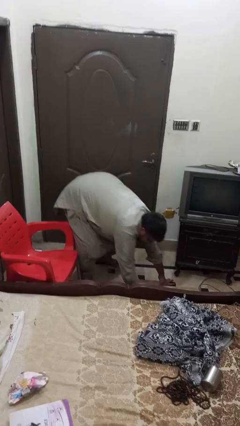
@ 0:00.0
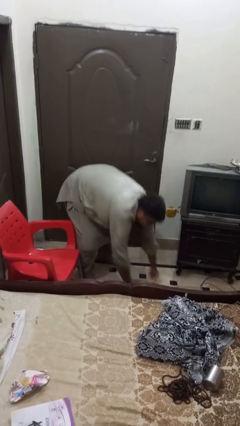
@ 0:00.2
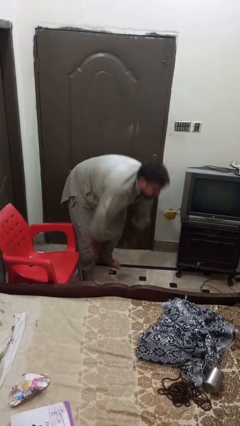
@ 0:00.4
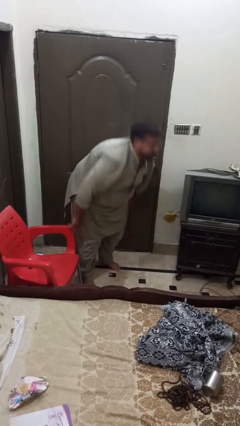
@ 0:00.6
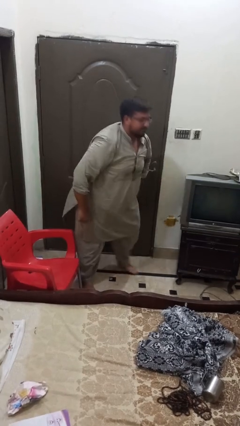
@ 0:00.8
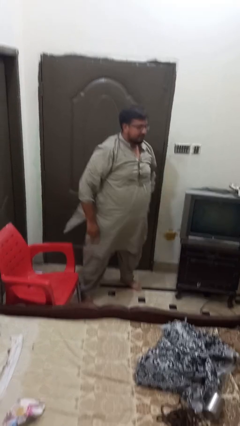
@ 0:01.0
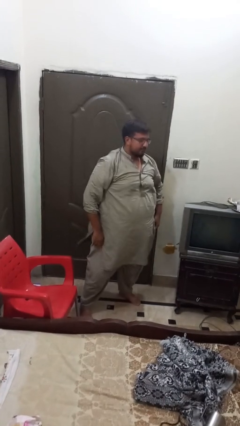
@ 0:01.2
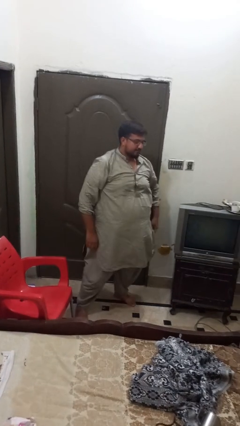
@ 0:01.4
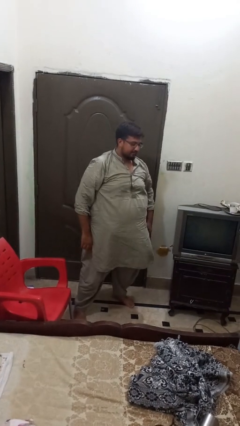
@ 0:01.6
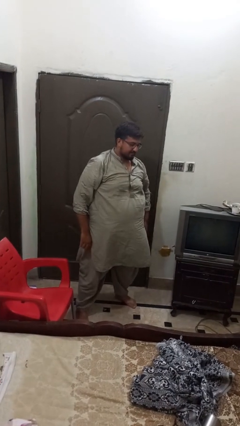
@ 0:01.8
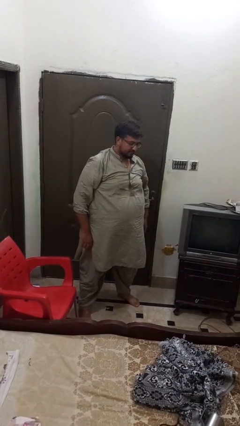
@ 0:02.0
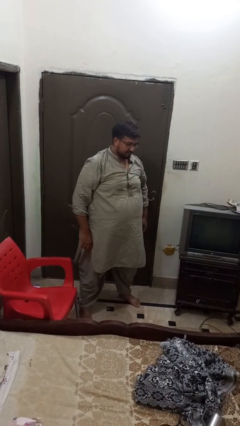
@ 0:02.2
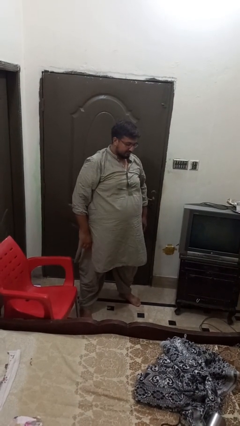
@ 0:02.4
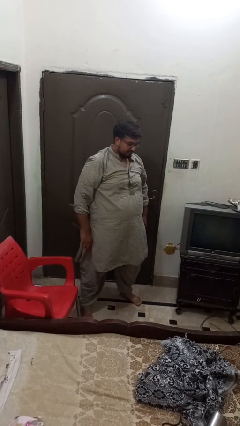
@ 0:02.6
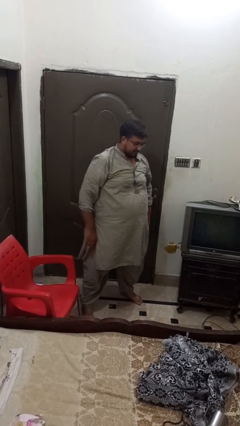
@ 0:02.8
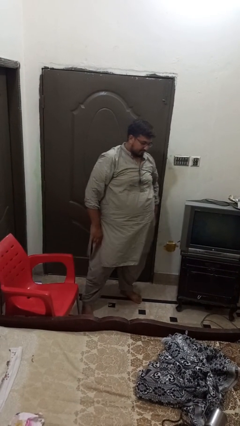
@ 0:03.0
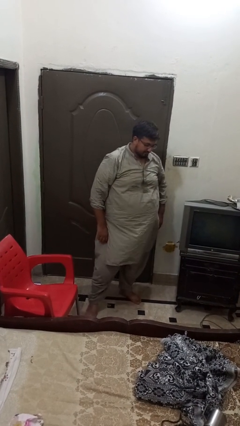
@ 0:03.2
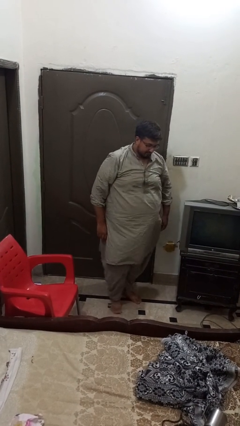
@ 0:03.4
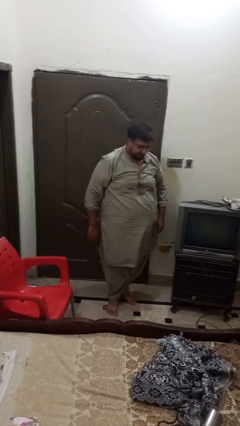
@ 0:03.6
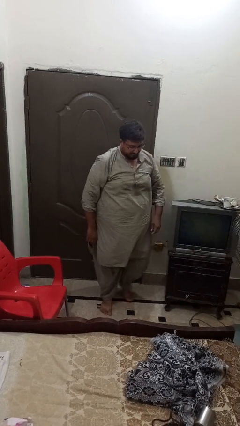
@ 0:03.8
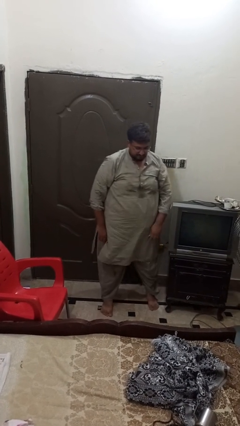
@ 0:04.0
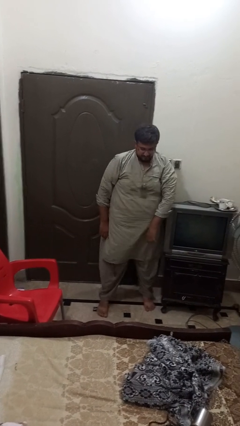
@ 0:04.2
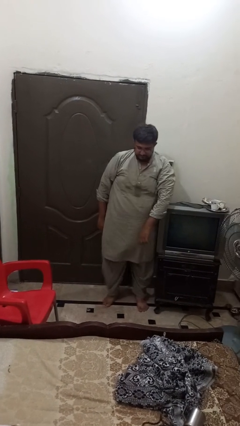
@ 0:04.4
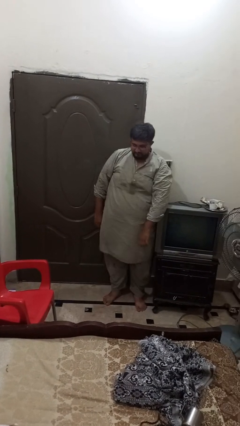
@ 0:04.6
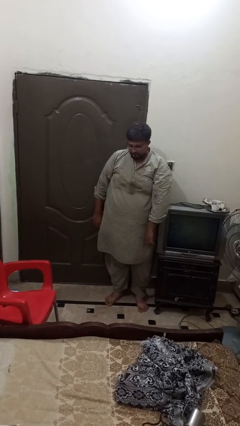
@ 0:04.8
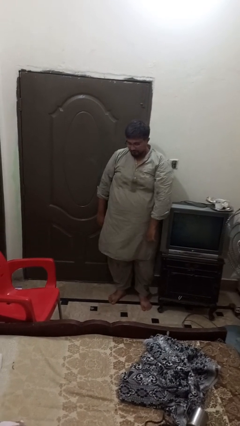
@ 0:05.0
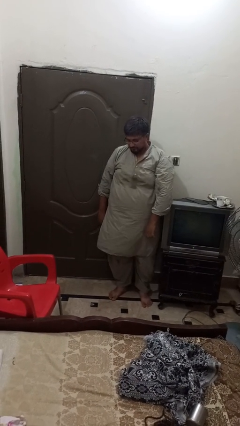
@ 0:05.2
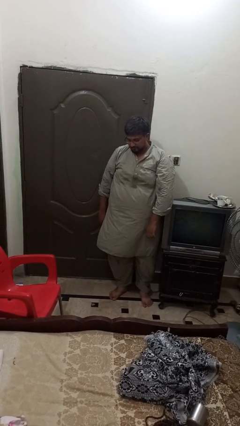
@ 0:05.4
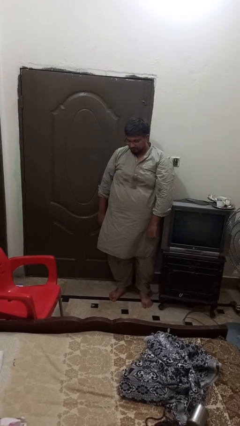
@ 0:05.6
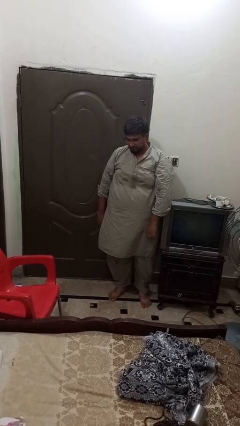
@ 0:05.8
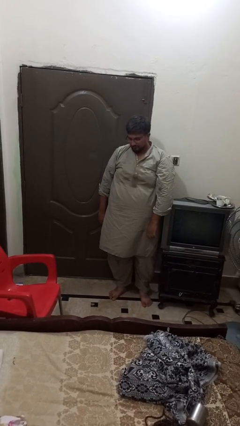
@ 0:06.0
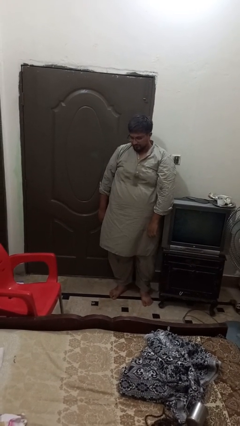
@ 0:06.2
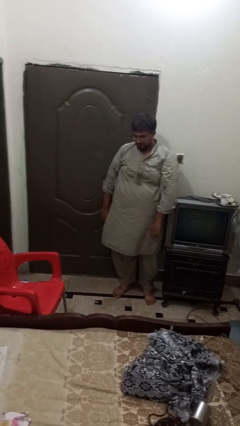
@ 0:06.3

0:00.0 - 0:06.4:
person stands up from floor

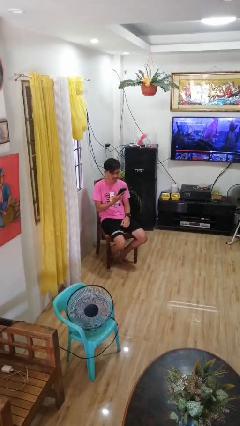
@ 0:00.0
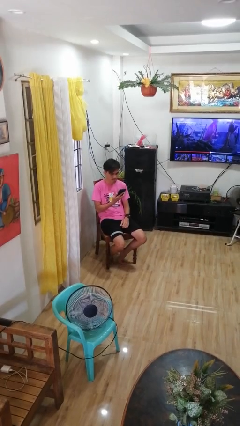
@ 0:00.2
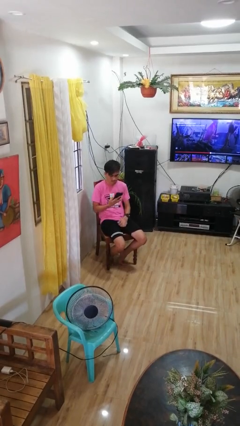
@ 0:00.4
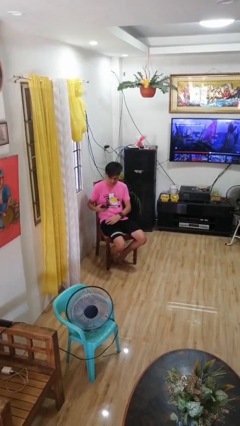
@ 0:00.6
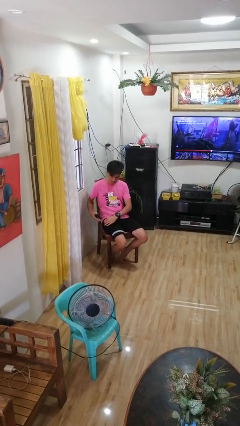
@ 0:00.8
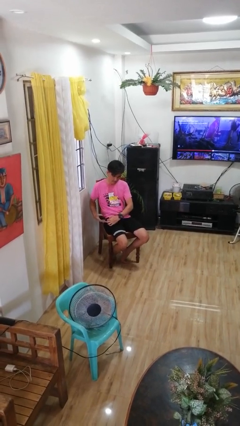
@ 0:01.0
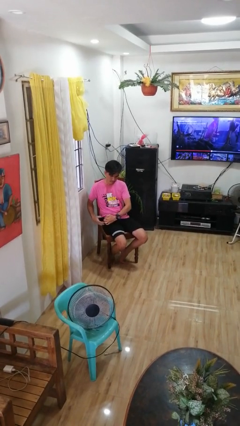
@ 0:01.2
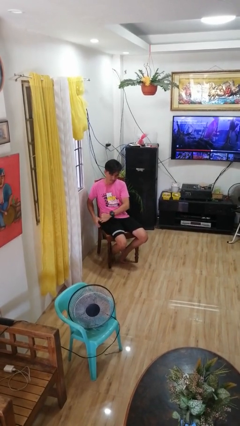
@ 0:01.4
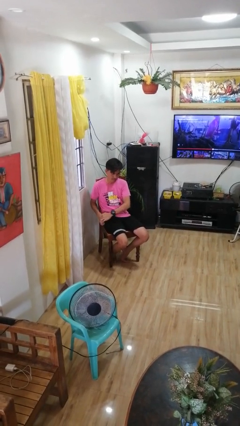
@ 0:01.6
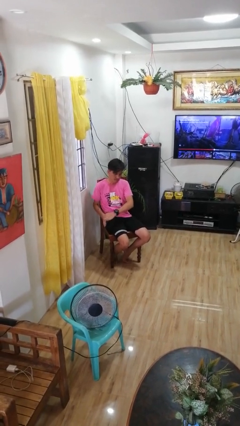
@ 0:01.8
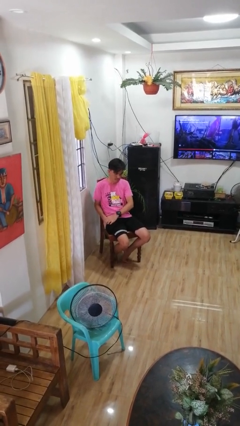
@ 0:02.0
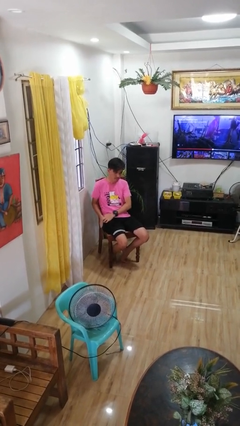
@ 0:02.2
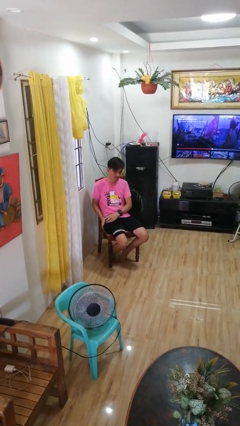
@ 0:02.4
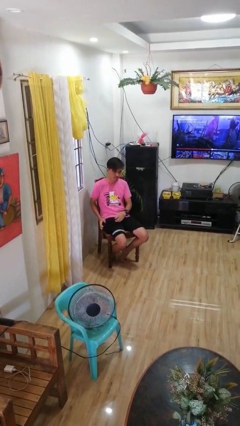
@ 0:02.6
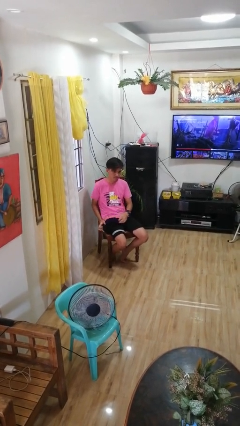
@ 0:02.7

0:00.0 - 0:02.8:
person puts phone into pocket

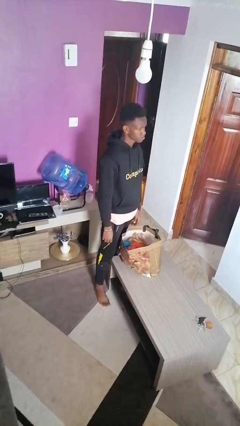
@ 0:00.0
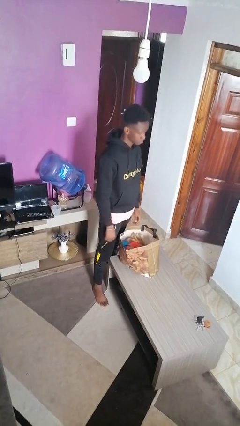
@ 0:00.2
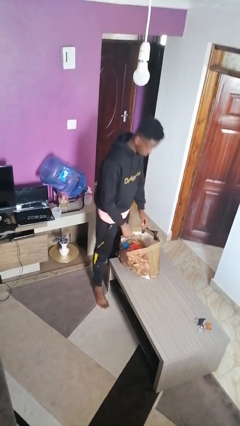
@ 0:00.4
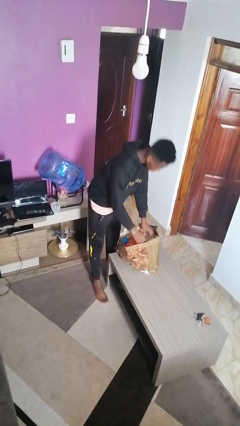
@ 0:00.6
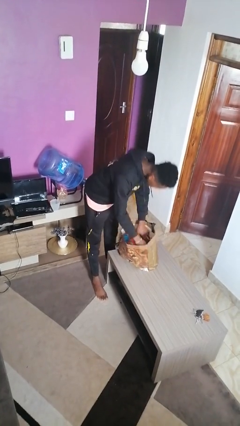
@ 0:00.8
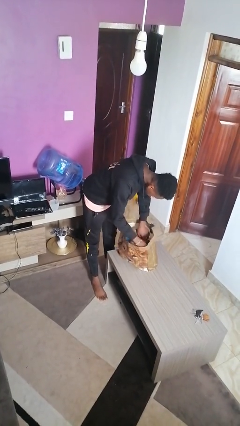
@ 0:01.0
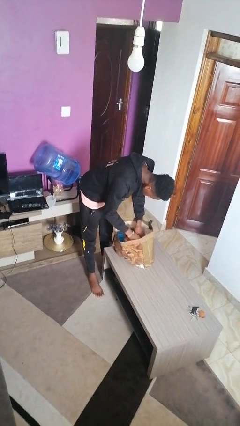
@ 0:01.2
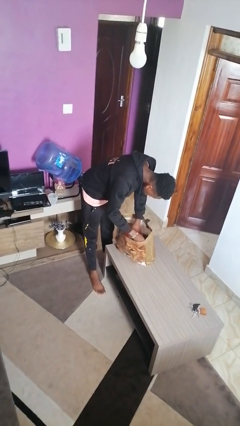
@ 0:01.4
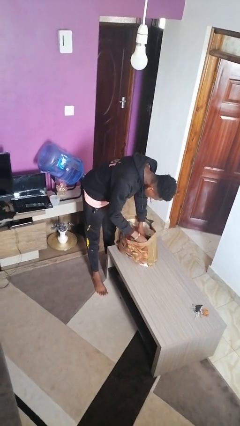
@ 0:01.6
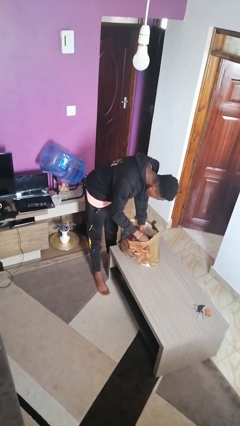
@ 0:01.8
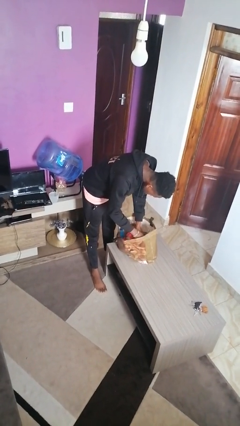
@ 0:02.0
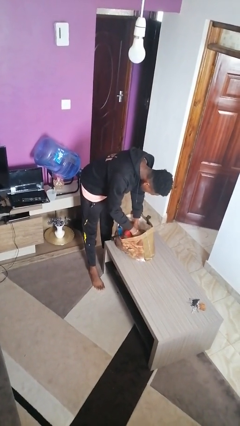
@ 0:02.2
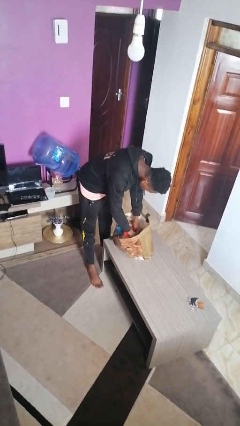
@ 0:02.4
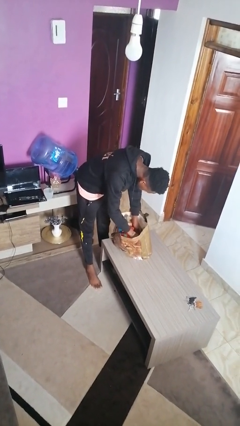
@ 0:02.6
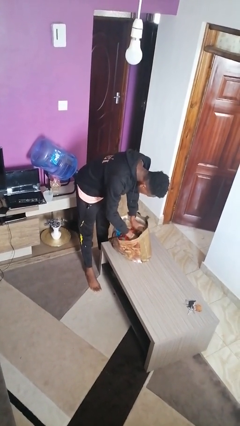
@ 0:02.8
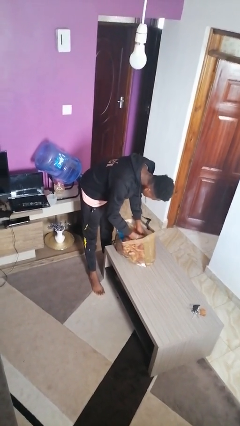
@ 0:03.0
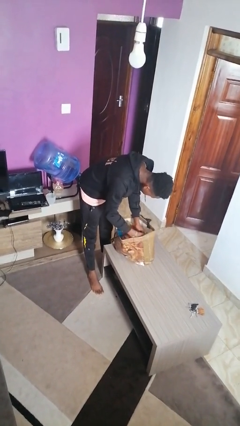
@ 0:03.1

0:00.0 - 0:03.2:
person searches in bag

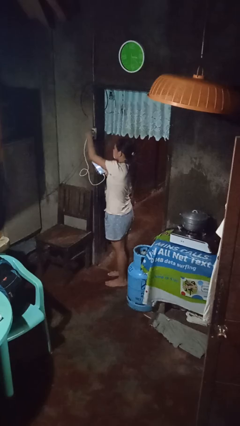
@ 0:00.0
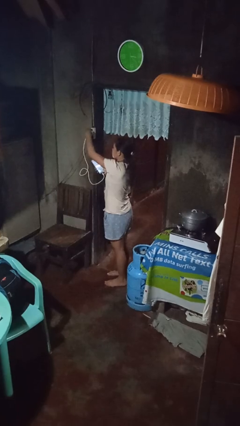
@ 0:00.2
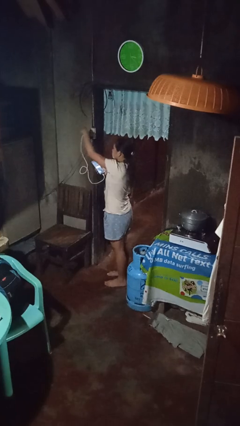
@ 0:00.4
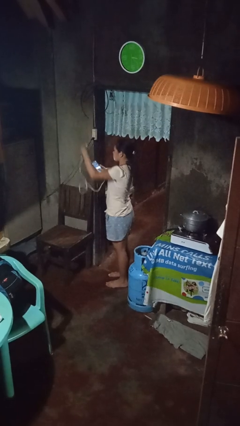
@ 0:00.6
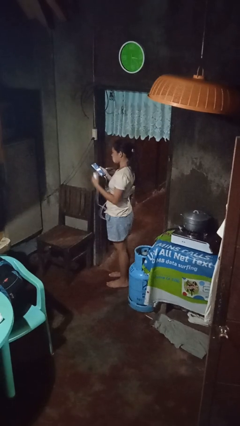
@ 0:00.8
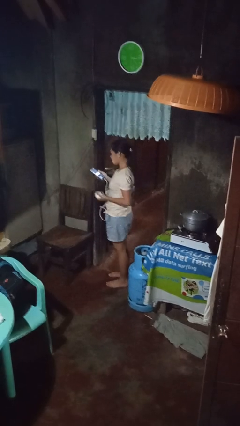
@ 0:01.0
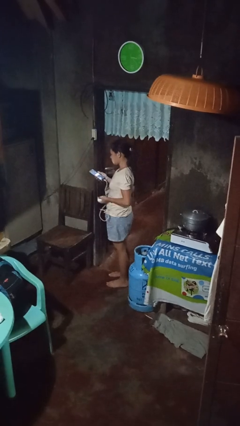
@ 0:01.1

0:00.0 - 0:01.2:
person unplugs from electrical socket

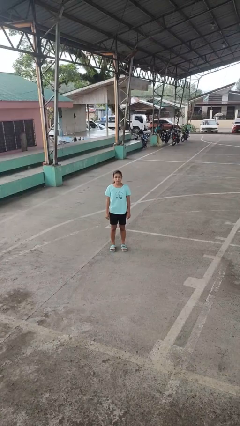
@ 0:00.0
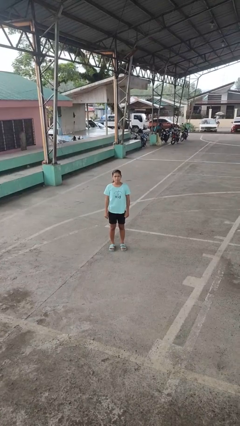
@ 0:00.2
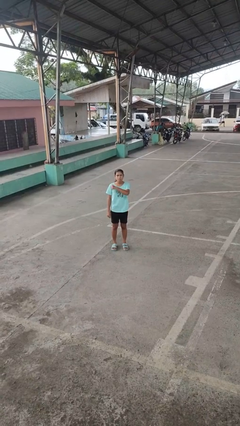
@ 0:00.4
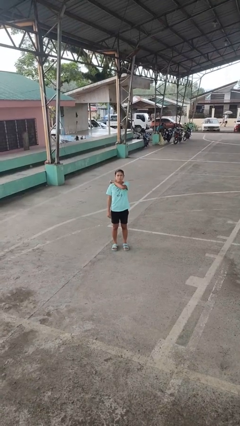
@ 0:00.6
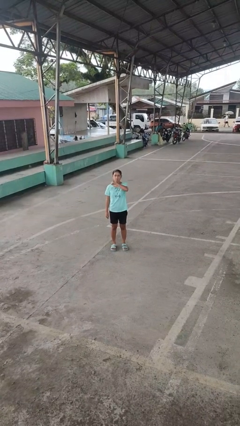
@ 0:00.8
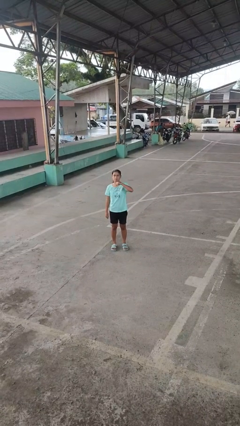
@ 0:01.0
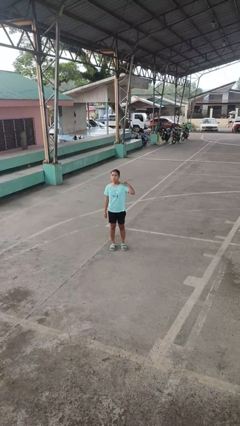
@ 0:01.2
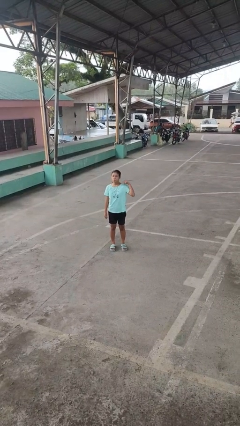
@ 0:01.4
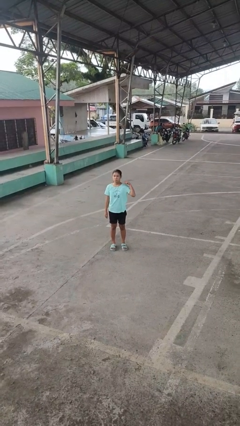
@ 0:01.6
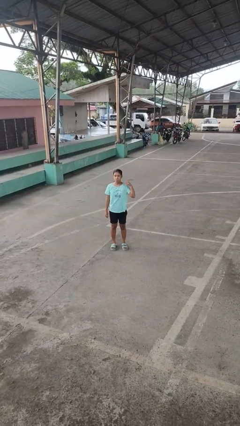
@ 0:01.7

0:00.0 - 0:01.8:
person gestures cut

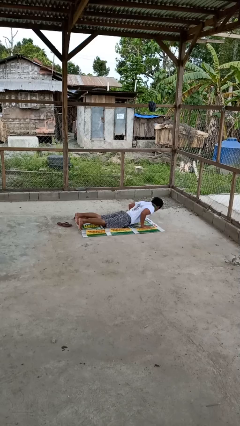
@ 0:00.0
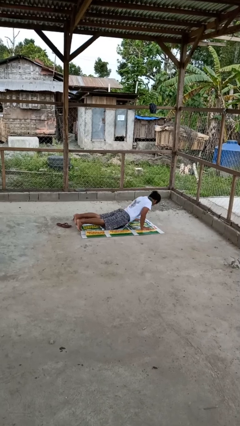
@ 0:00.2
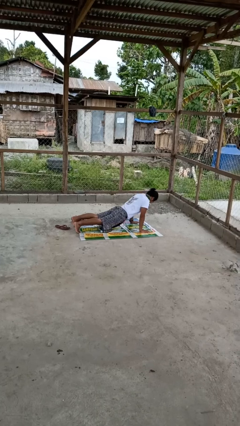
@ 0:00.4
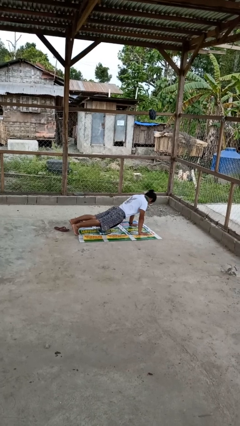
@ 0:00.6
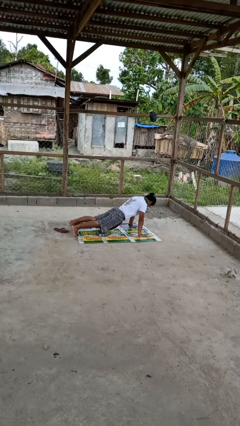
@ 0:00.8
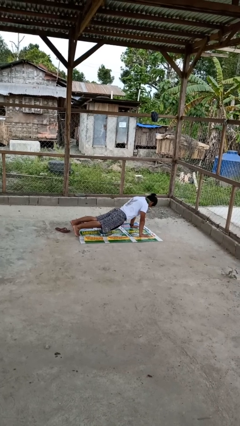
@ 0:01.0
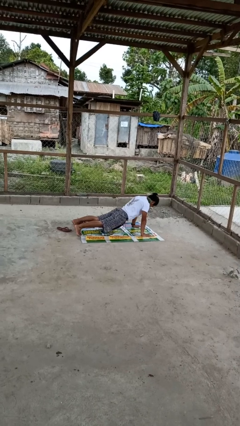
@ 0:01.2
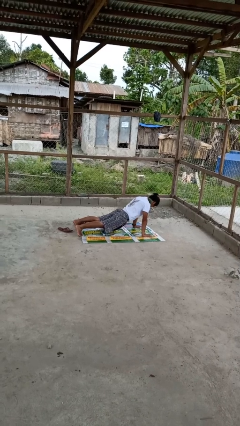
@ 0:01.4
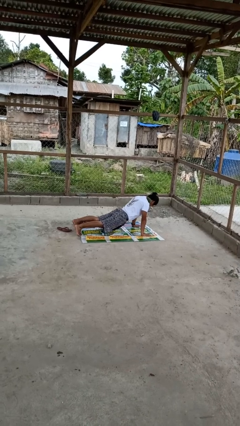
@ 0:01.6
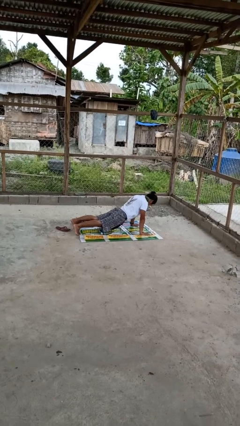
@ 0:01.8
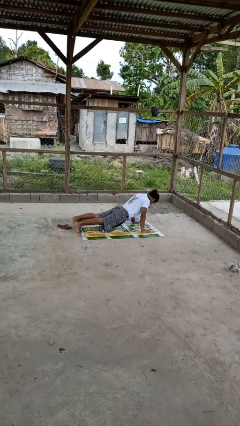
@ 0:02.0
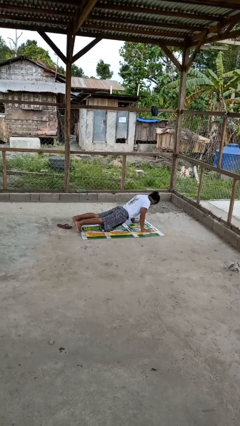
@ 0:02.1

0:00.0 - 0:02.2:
person exercises with pushup
